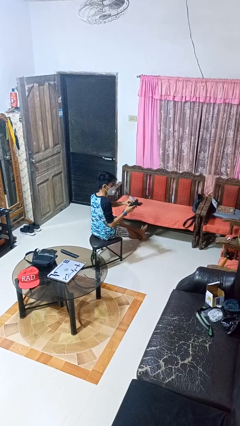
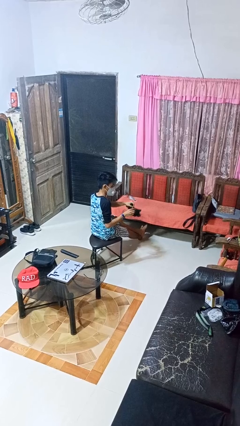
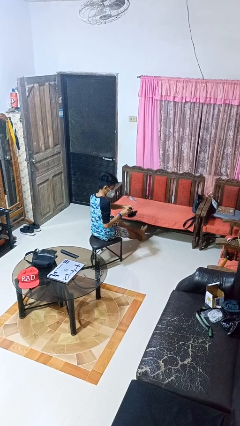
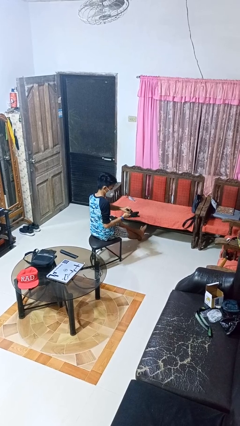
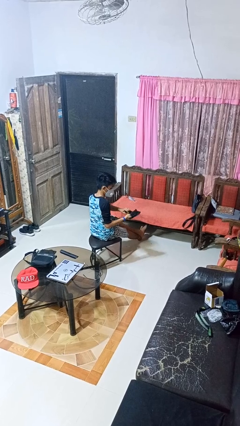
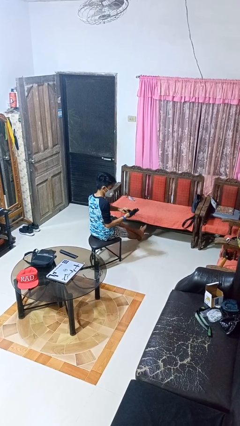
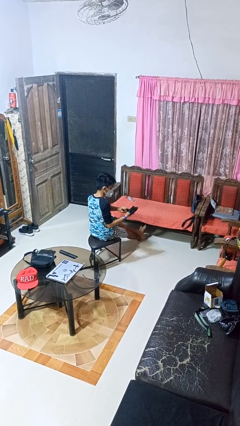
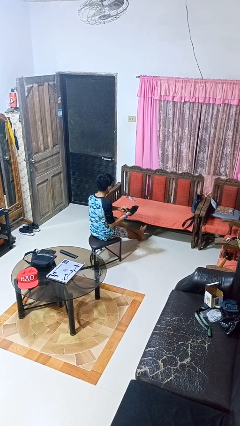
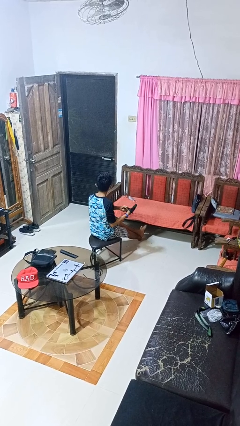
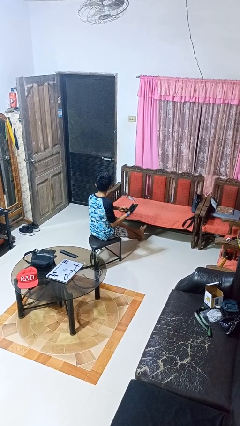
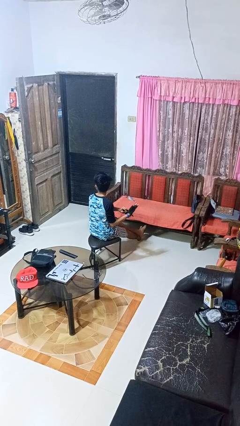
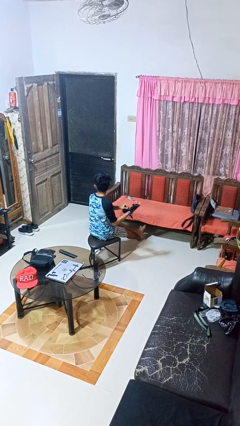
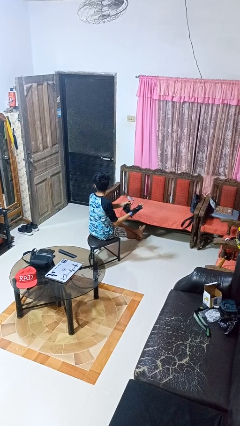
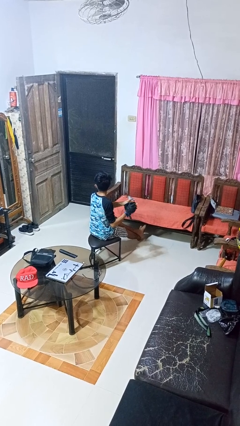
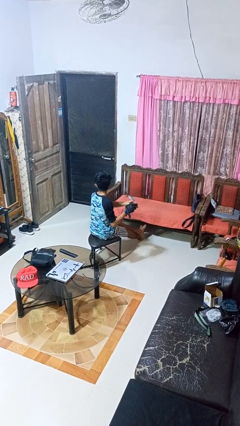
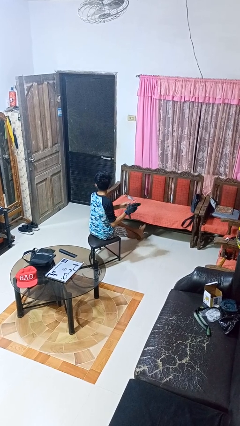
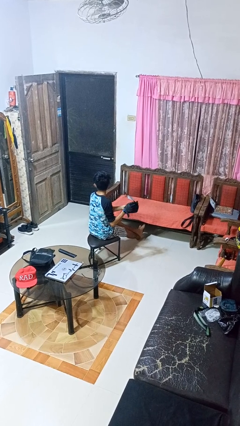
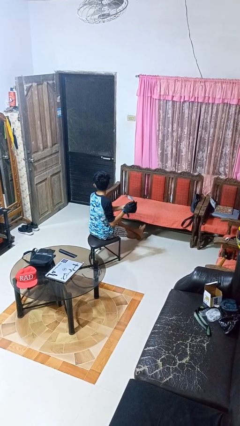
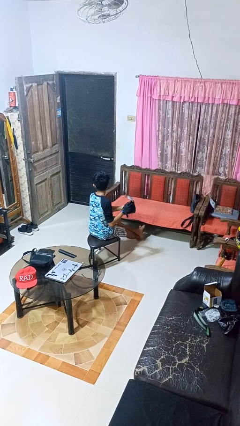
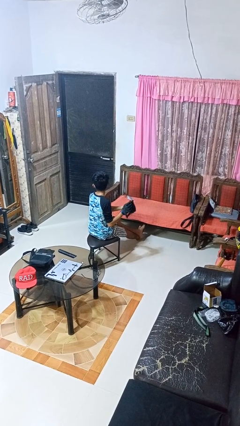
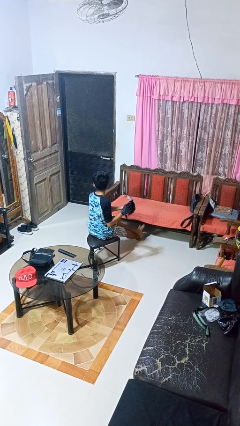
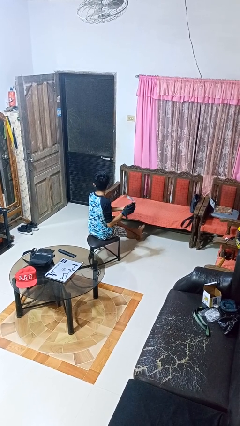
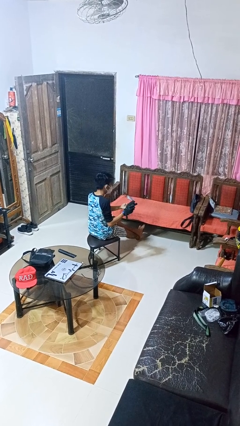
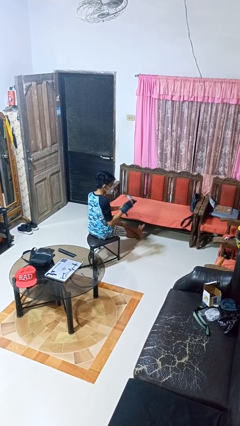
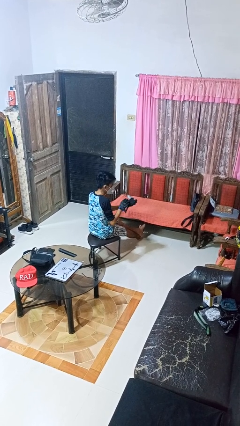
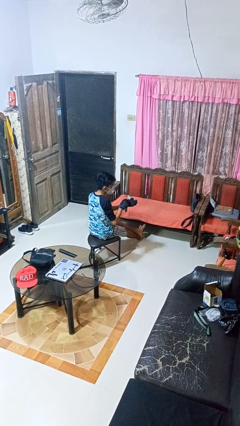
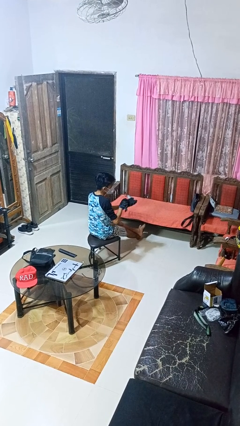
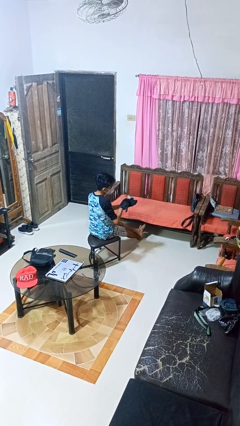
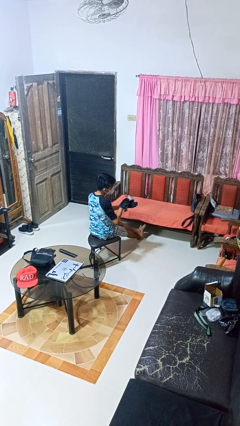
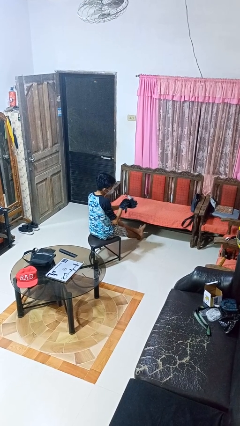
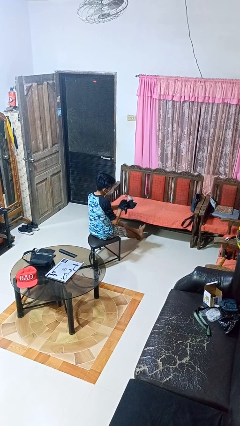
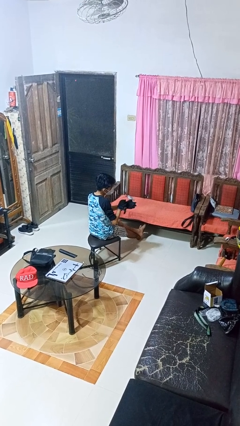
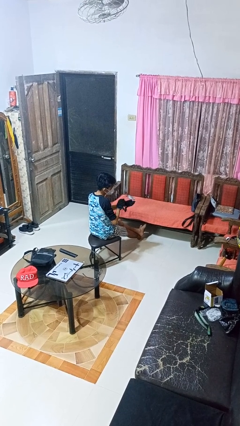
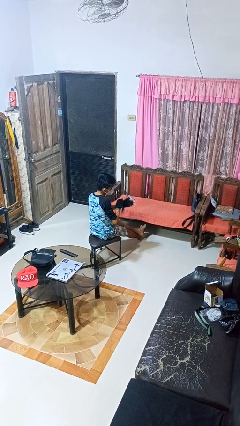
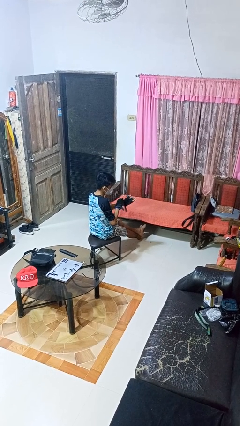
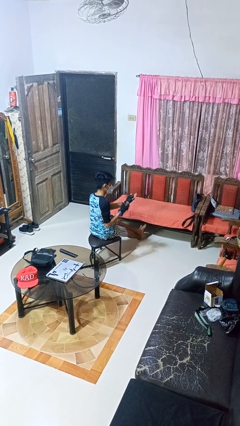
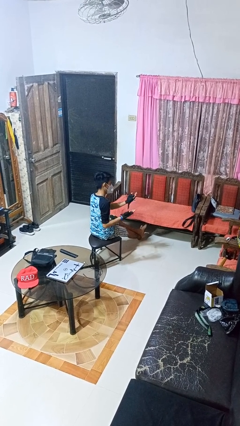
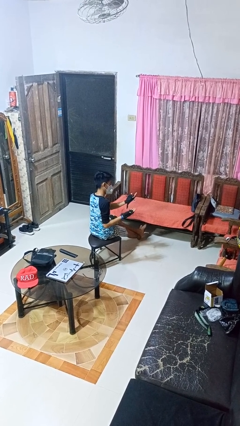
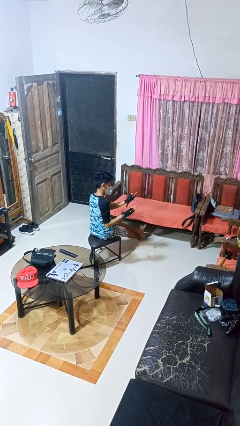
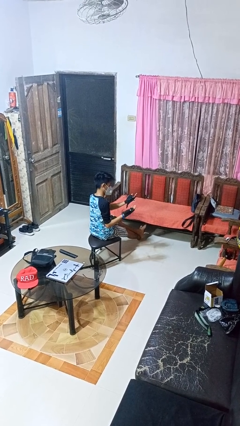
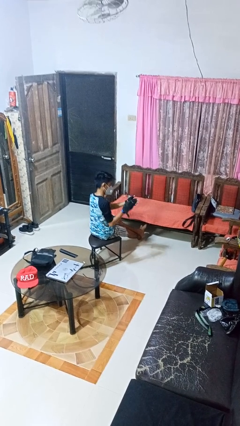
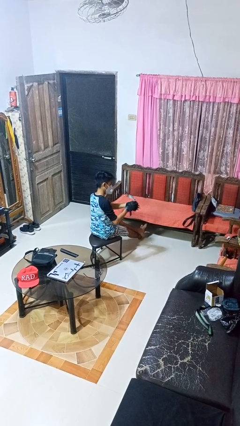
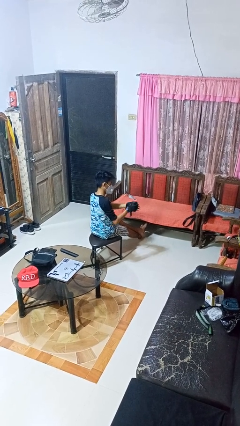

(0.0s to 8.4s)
person puts on gloves

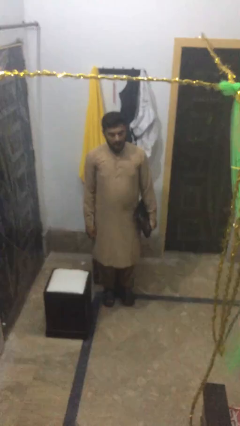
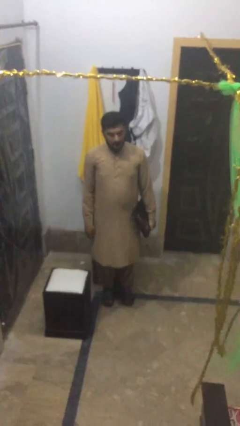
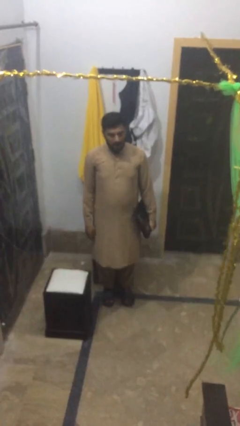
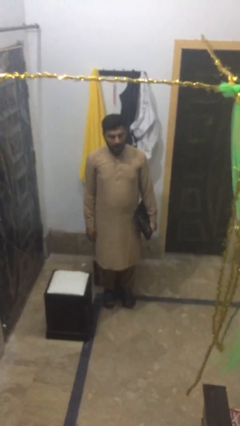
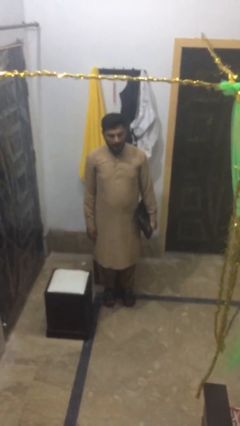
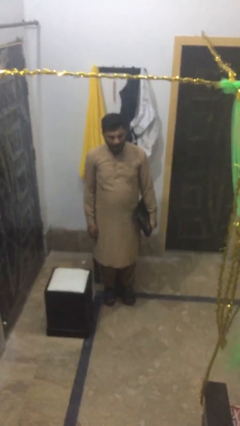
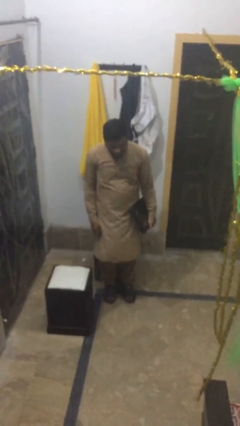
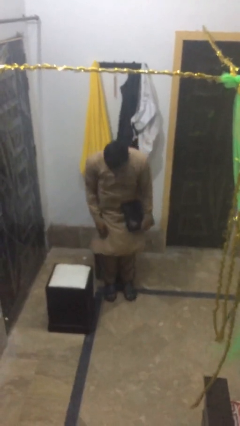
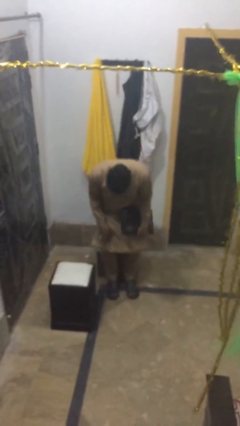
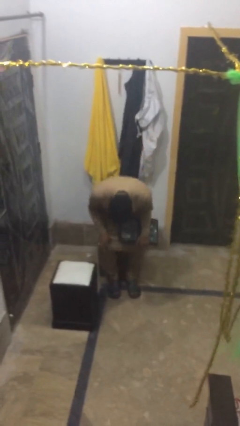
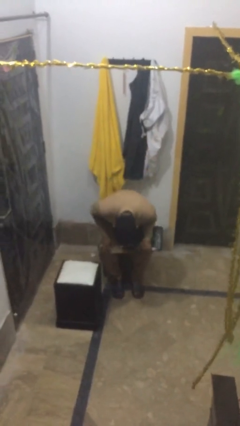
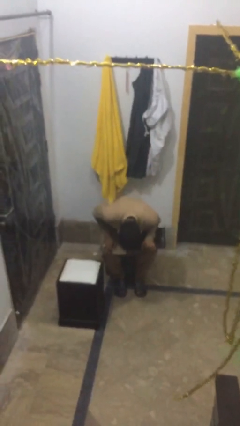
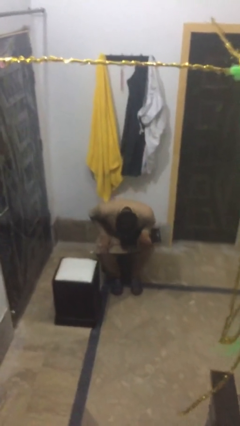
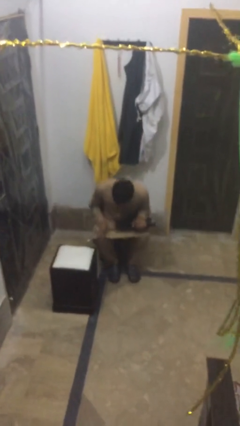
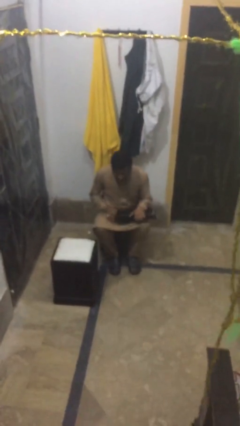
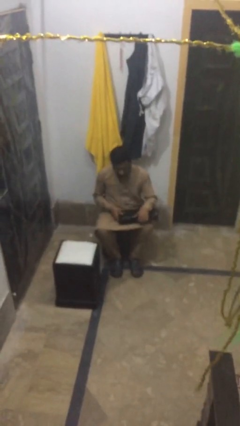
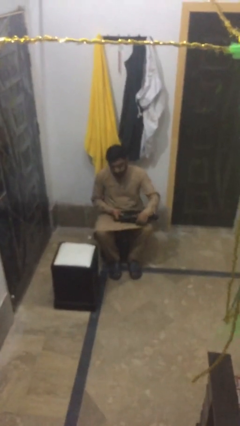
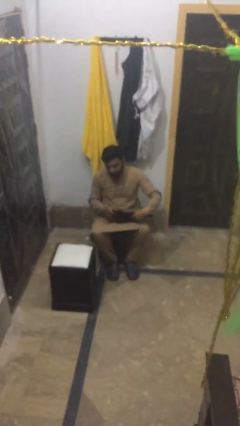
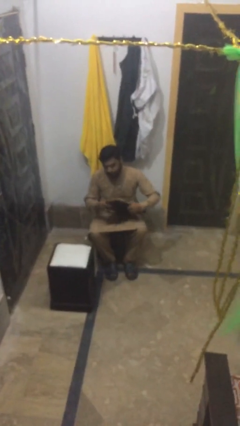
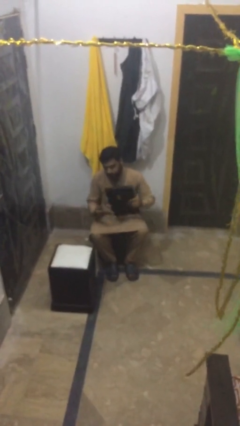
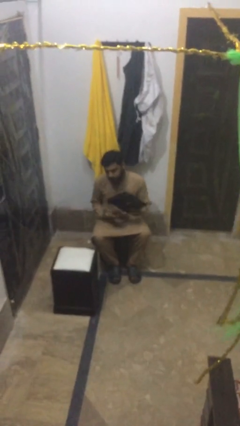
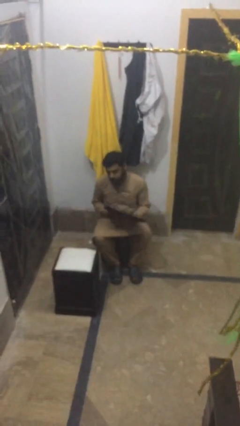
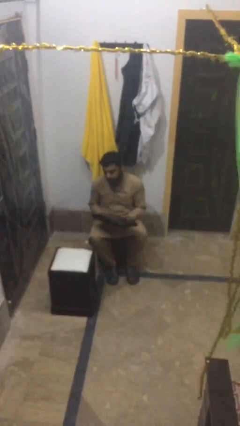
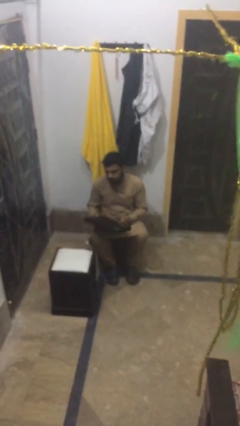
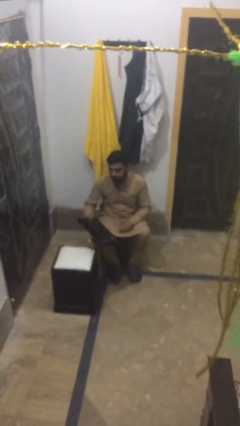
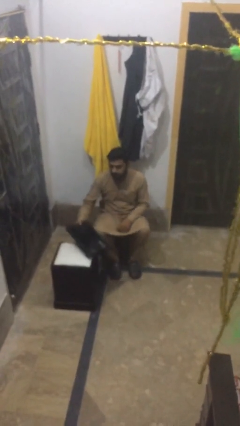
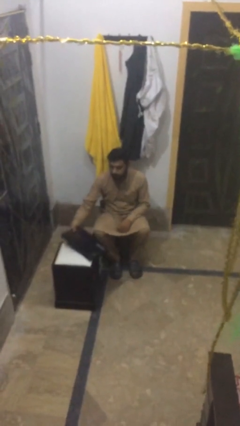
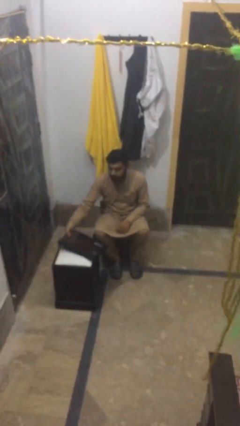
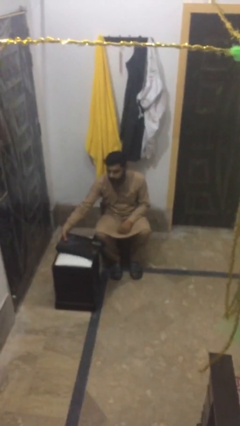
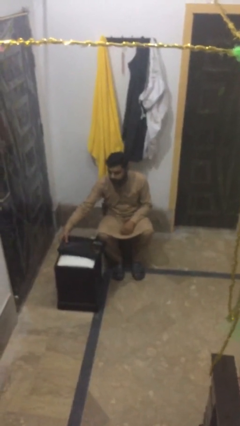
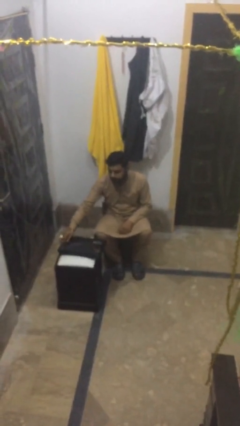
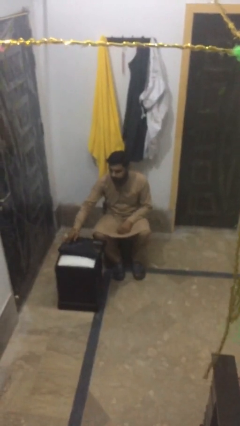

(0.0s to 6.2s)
person sits down

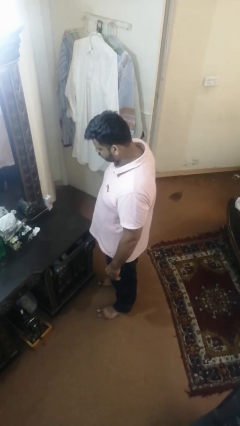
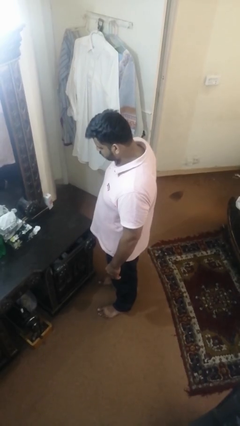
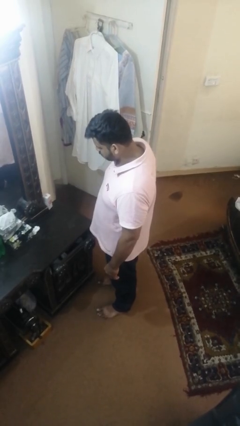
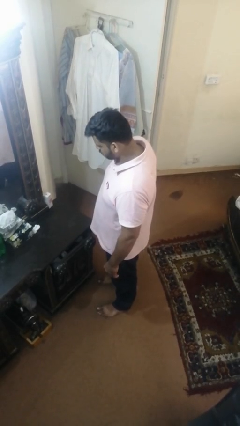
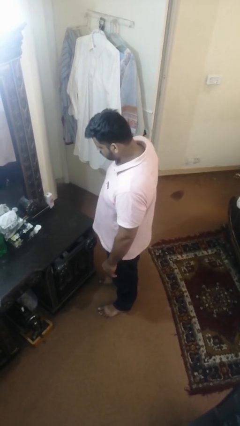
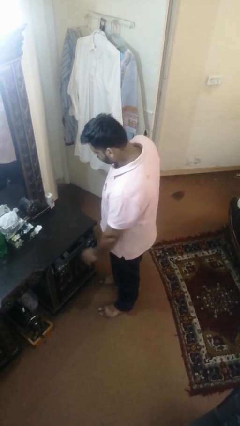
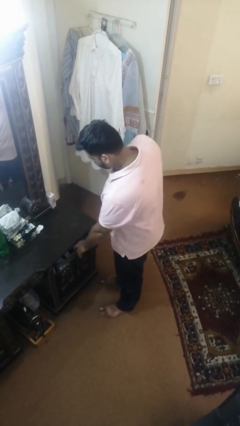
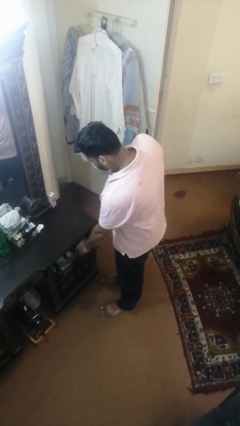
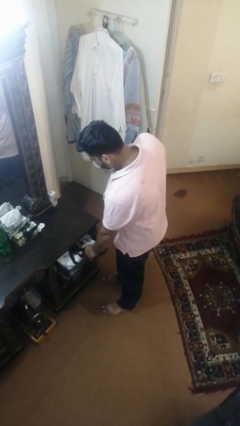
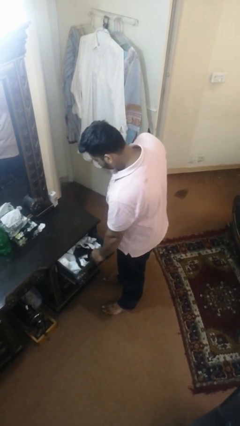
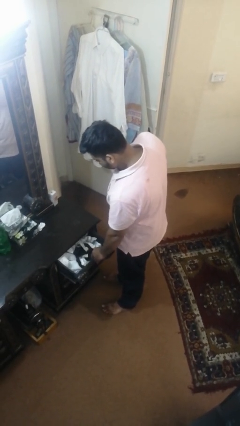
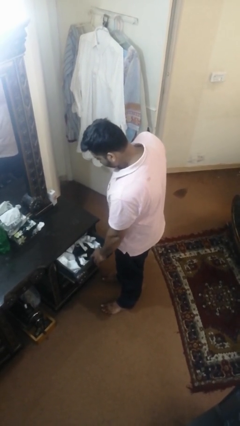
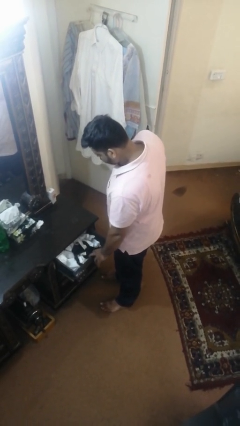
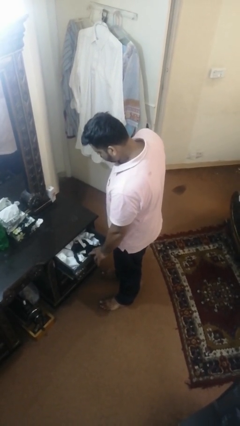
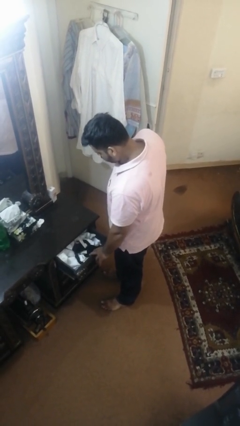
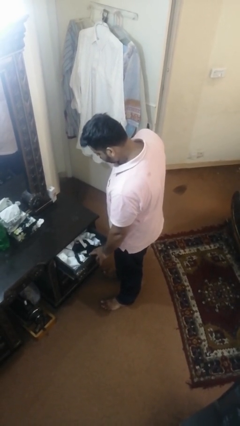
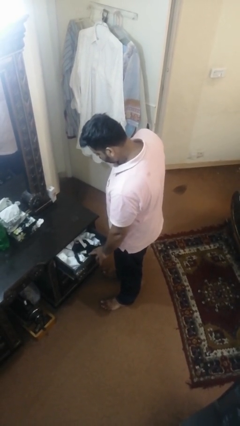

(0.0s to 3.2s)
person opens dresser drawer

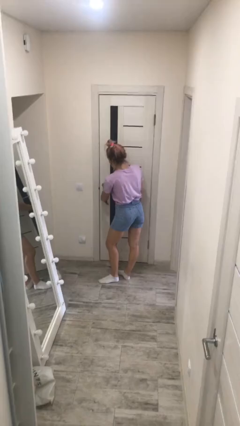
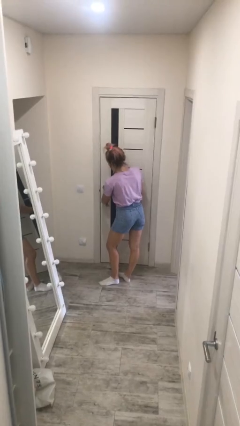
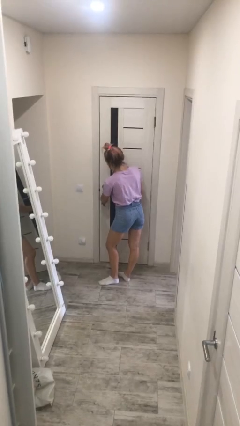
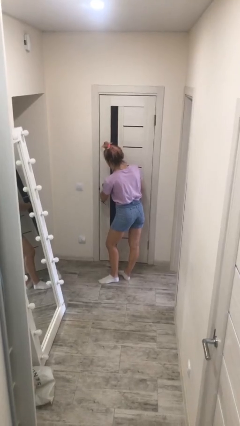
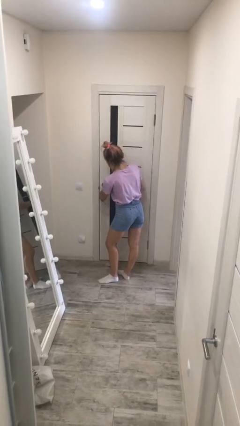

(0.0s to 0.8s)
person unlocks door with keys
